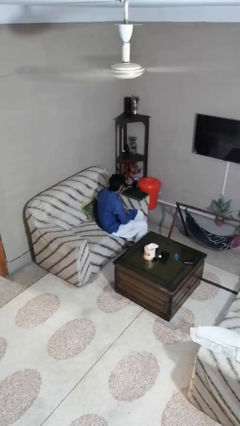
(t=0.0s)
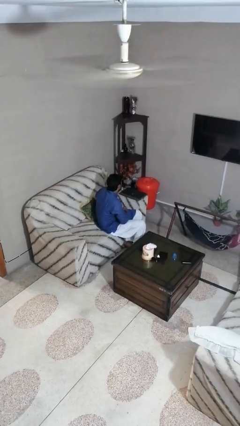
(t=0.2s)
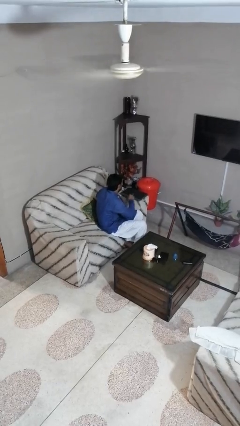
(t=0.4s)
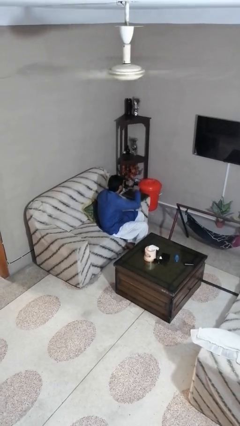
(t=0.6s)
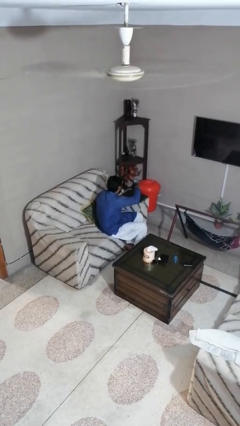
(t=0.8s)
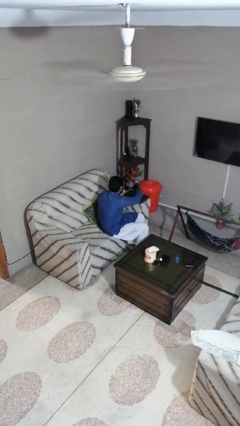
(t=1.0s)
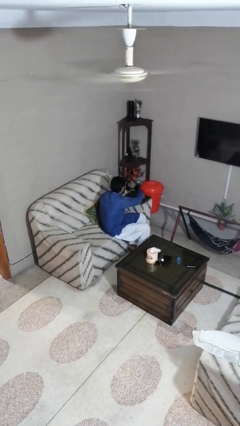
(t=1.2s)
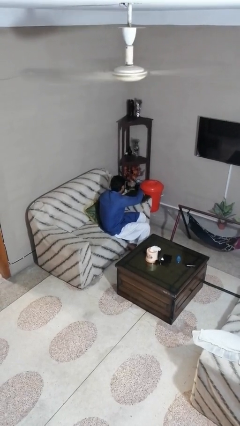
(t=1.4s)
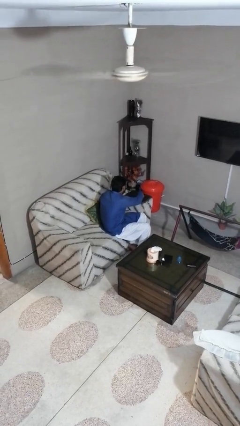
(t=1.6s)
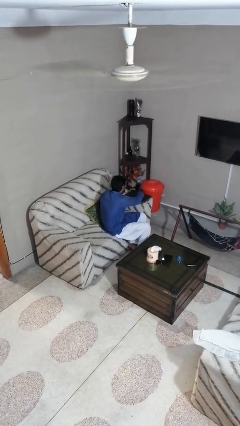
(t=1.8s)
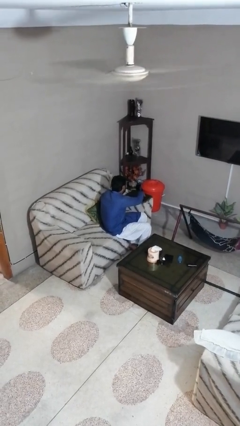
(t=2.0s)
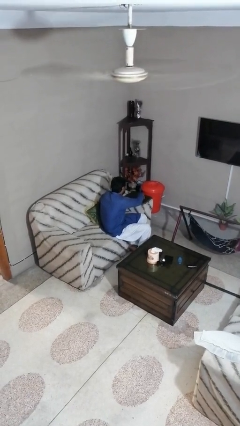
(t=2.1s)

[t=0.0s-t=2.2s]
person taps object with finger

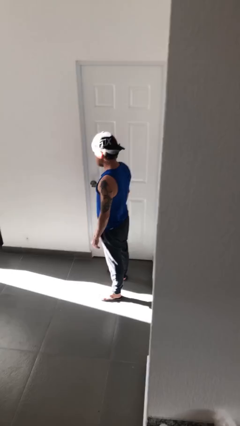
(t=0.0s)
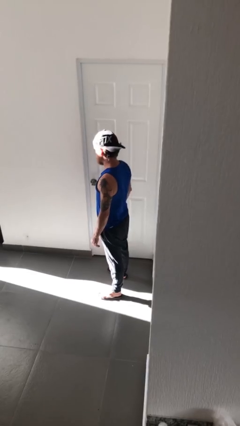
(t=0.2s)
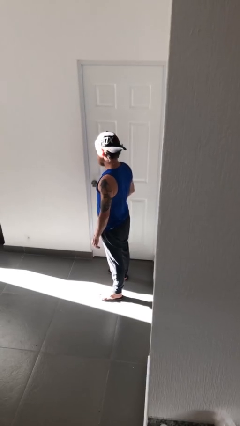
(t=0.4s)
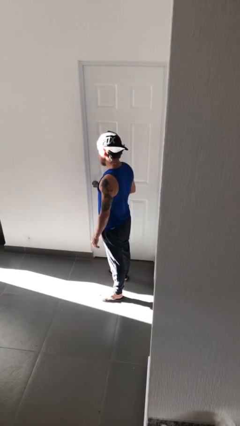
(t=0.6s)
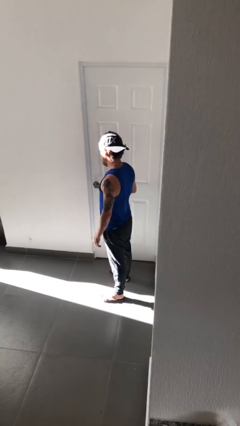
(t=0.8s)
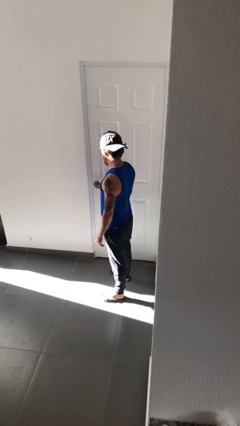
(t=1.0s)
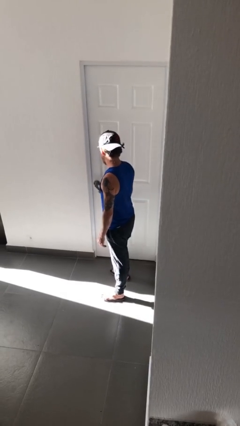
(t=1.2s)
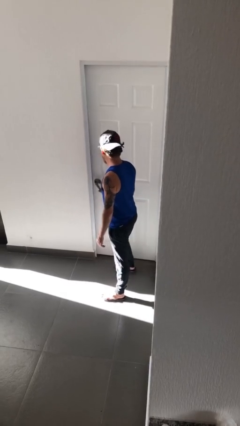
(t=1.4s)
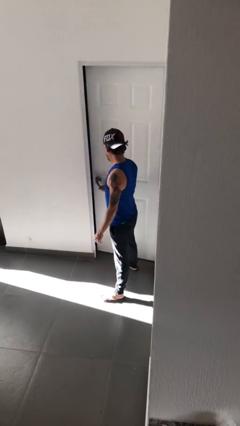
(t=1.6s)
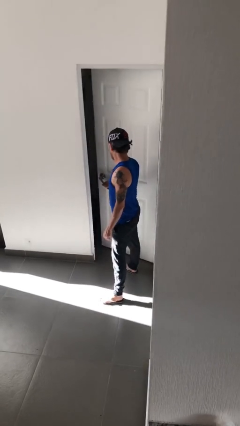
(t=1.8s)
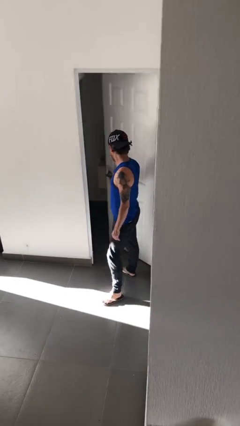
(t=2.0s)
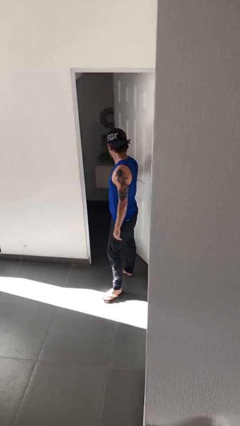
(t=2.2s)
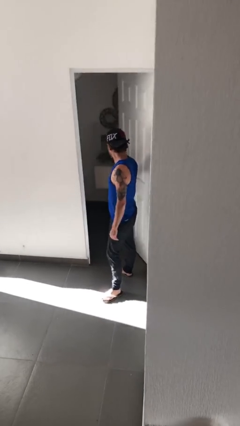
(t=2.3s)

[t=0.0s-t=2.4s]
person opens facility door

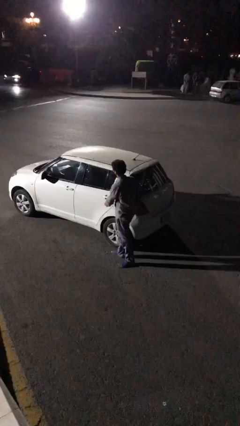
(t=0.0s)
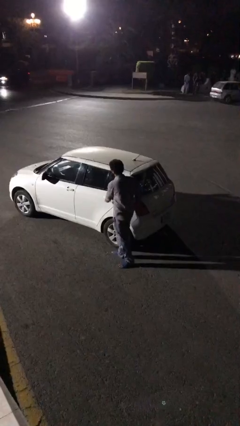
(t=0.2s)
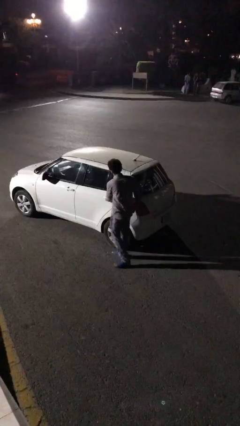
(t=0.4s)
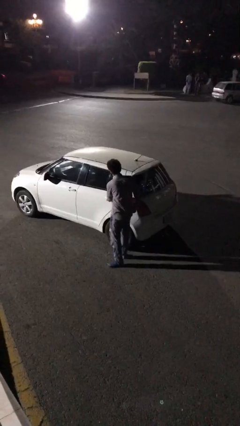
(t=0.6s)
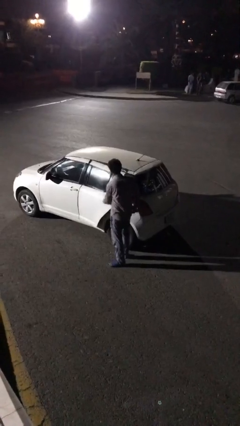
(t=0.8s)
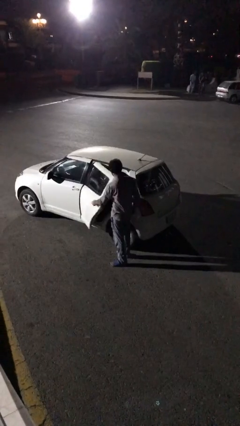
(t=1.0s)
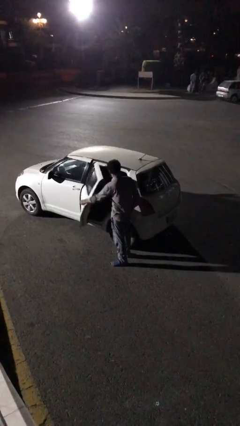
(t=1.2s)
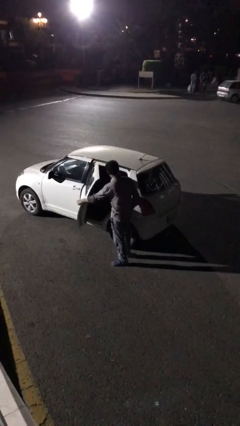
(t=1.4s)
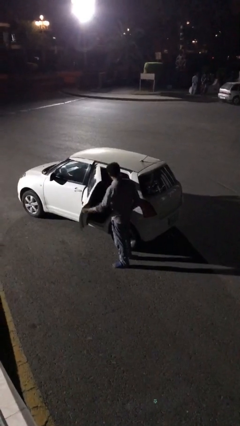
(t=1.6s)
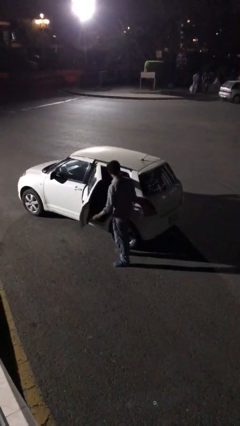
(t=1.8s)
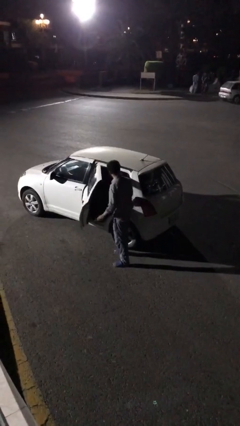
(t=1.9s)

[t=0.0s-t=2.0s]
person opens car door

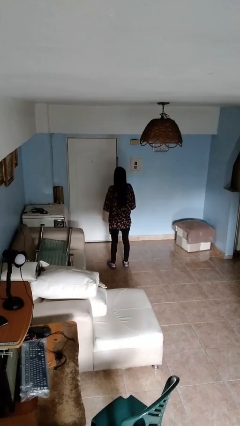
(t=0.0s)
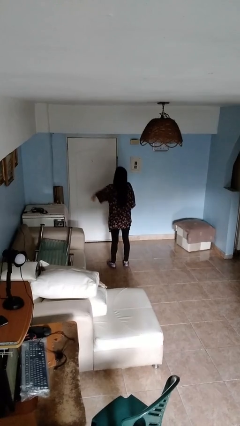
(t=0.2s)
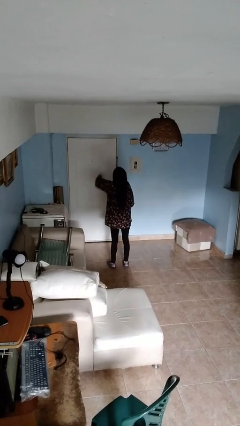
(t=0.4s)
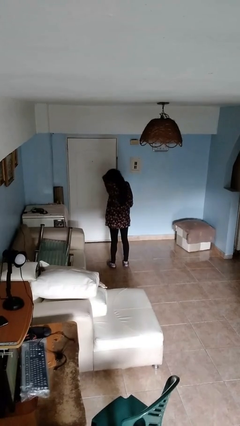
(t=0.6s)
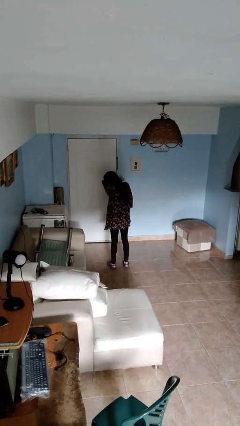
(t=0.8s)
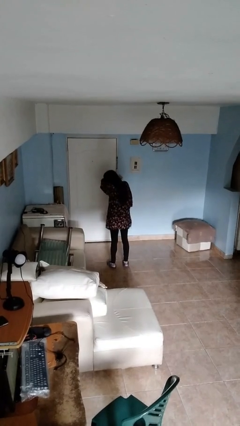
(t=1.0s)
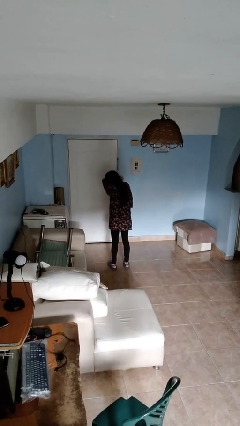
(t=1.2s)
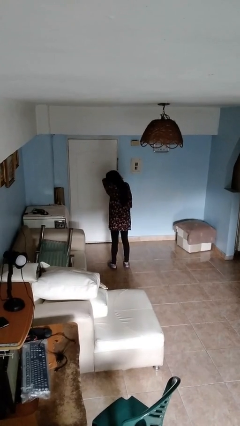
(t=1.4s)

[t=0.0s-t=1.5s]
person sneezes into arm

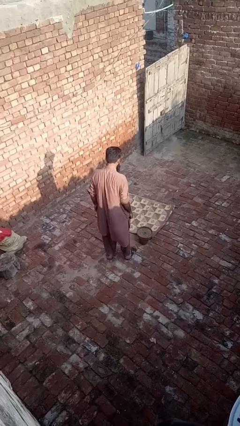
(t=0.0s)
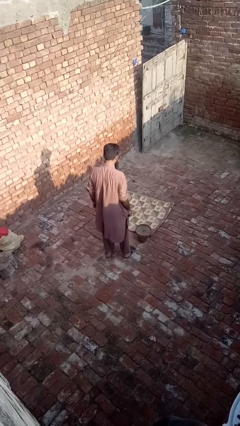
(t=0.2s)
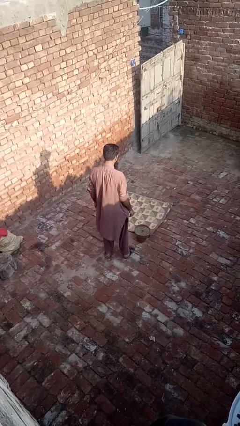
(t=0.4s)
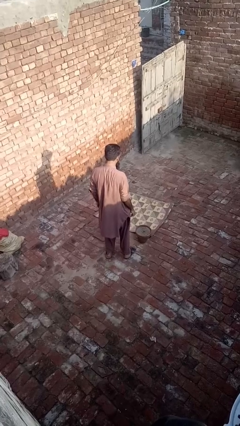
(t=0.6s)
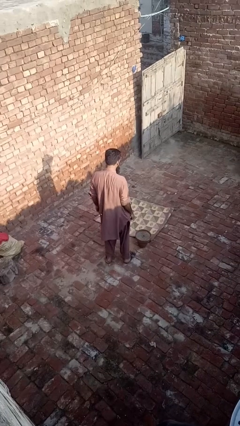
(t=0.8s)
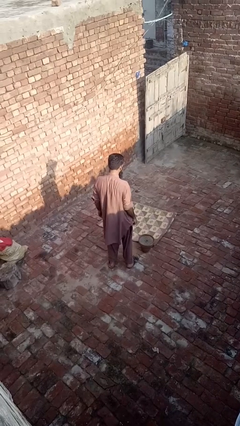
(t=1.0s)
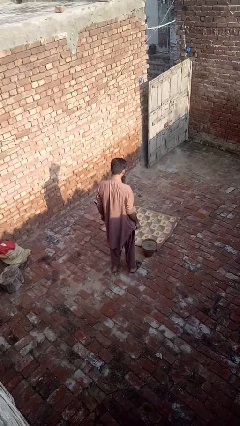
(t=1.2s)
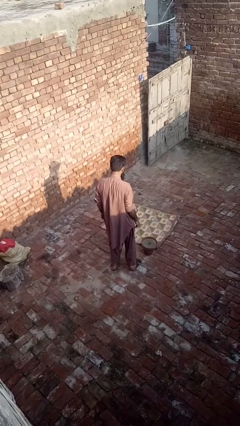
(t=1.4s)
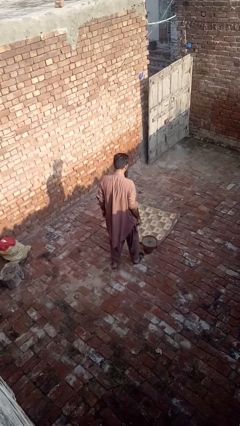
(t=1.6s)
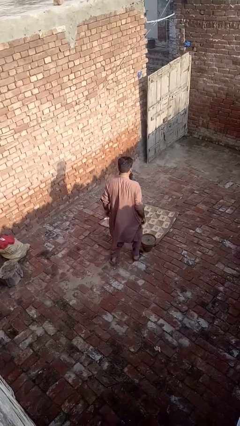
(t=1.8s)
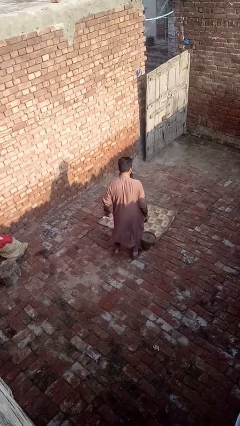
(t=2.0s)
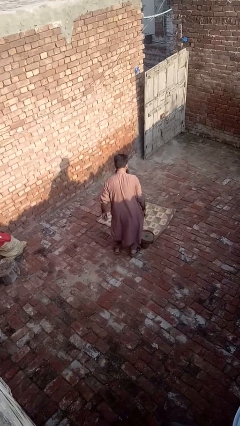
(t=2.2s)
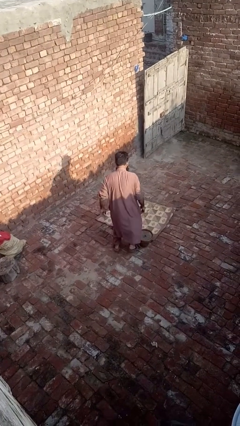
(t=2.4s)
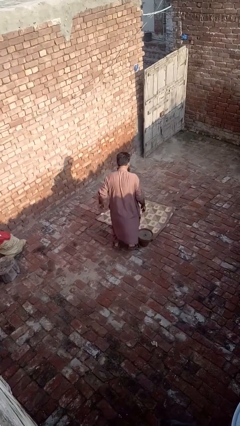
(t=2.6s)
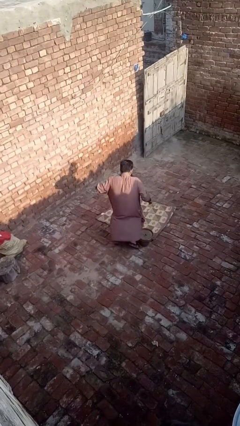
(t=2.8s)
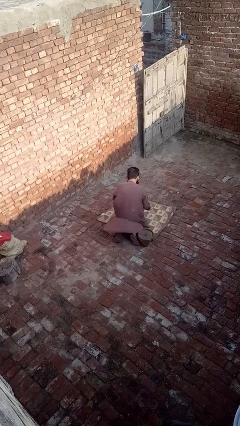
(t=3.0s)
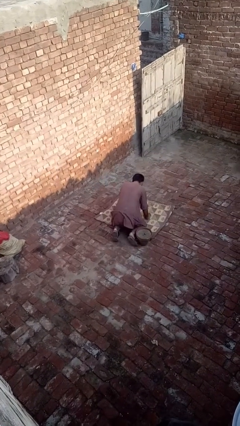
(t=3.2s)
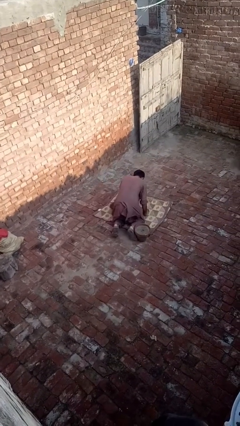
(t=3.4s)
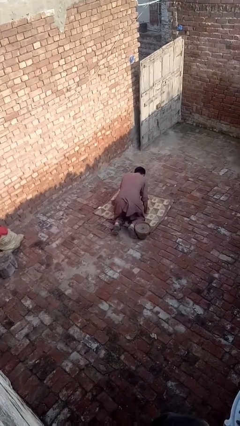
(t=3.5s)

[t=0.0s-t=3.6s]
person trips on object on floor

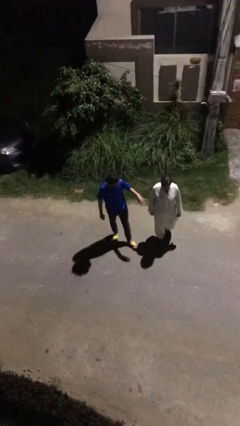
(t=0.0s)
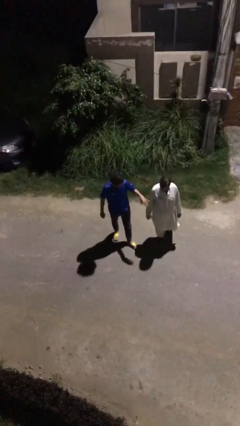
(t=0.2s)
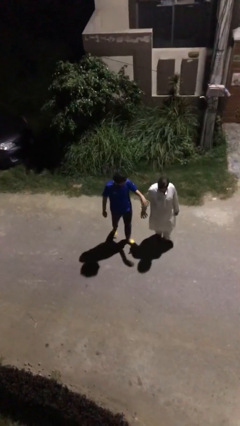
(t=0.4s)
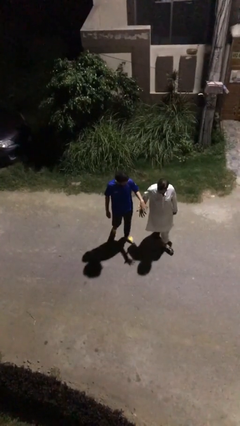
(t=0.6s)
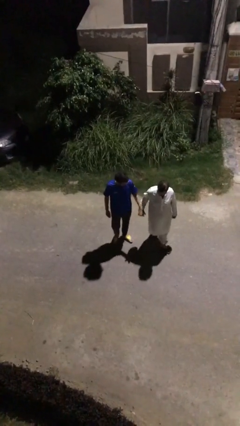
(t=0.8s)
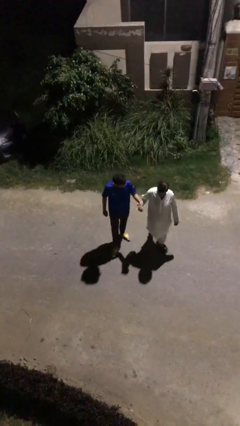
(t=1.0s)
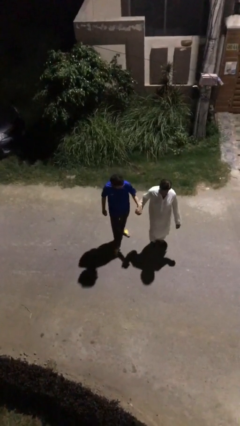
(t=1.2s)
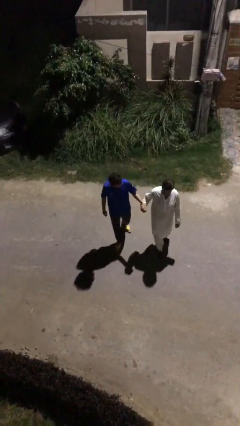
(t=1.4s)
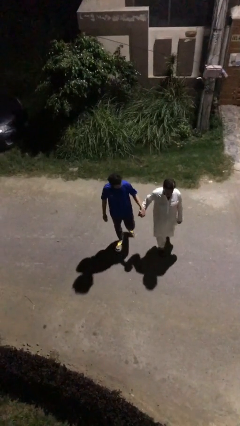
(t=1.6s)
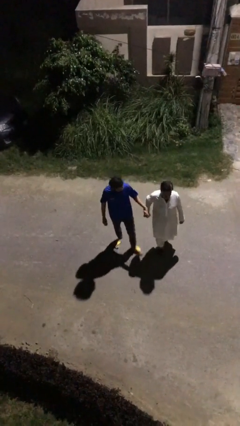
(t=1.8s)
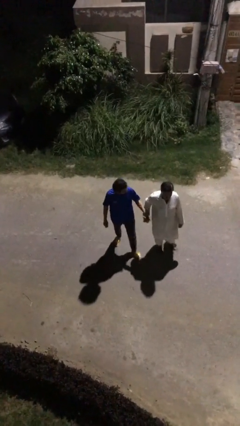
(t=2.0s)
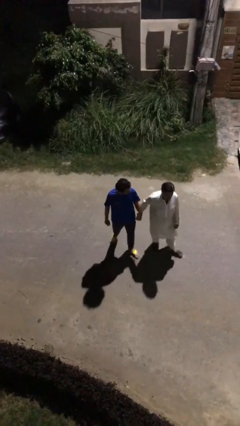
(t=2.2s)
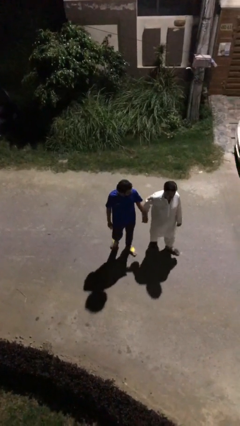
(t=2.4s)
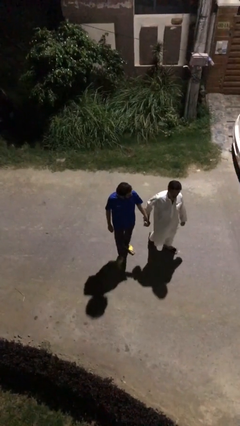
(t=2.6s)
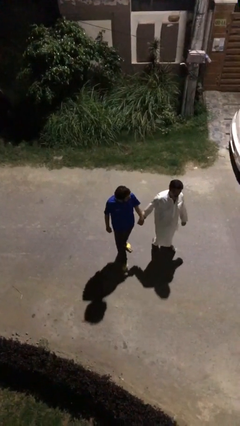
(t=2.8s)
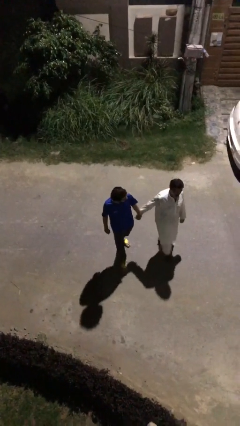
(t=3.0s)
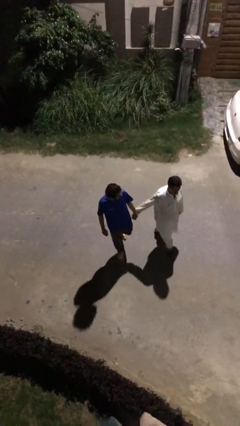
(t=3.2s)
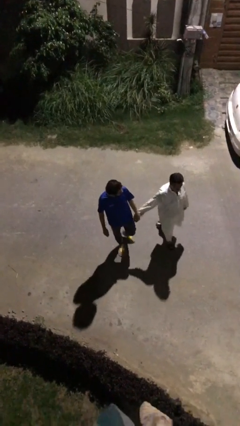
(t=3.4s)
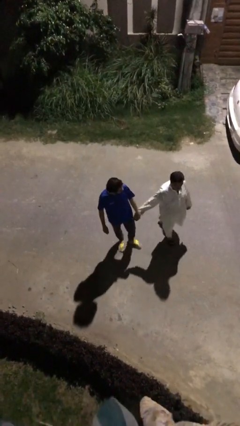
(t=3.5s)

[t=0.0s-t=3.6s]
person holds hand

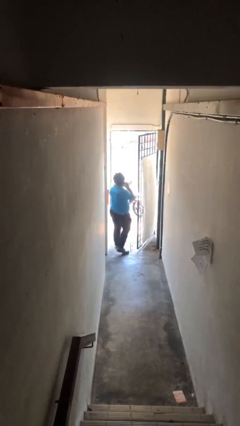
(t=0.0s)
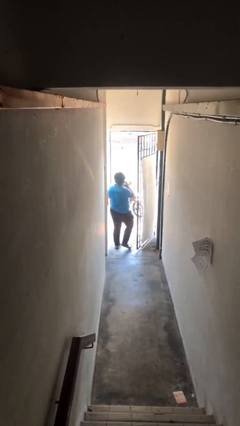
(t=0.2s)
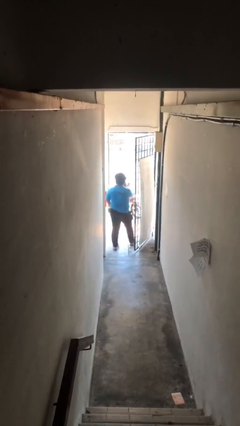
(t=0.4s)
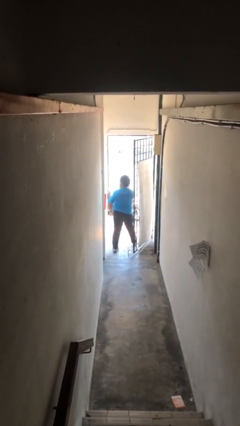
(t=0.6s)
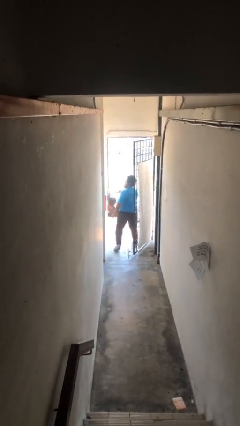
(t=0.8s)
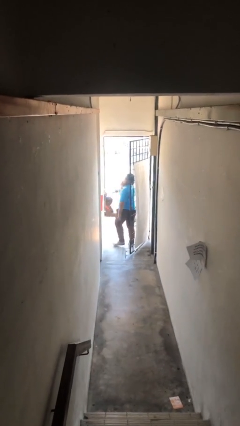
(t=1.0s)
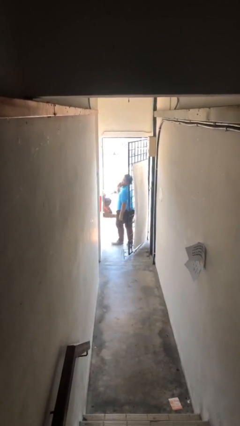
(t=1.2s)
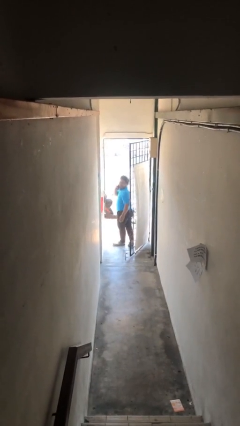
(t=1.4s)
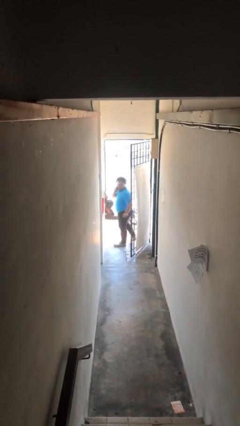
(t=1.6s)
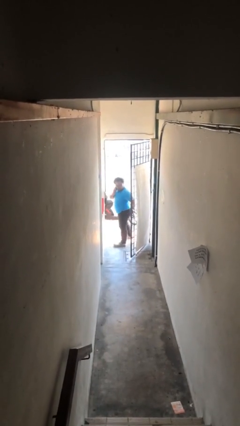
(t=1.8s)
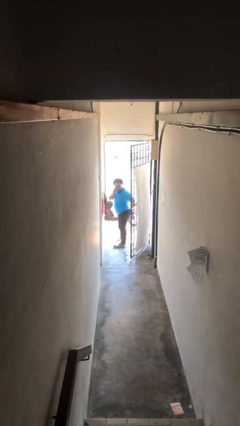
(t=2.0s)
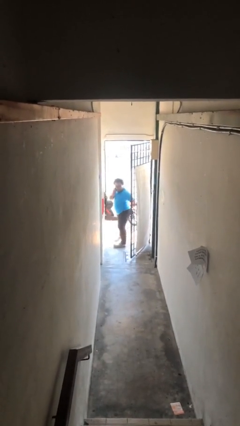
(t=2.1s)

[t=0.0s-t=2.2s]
person exits scene through structure
